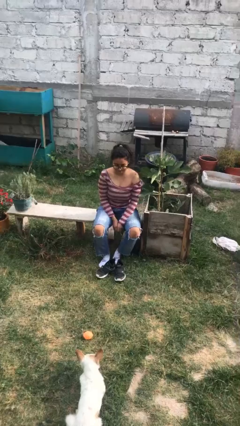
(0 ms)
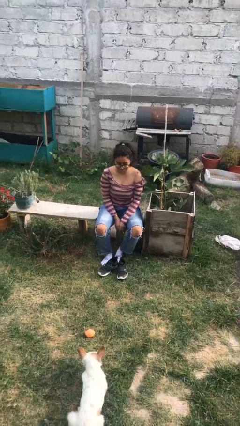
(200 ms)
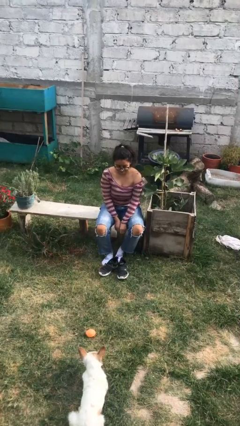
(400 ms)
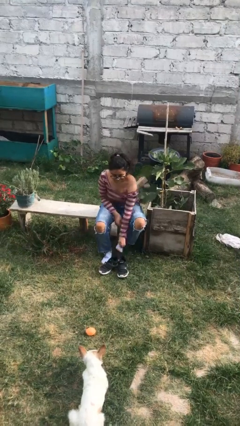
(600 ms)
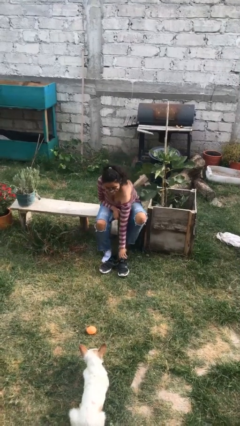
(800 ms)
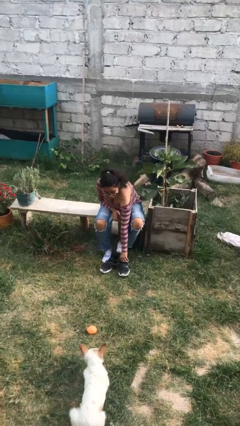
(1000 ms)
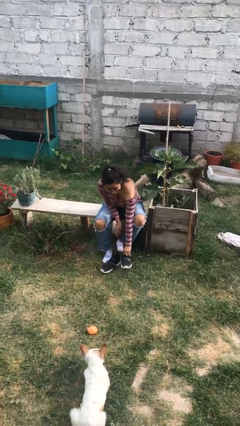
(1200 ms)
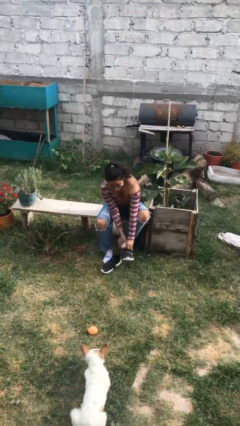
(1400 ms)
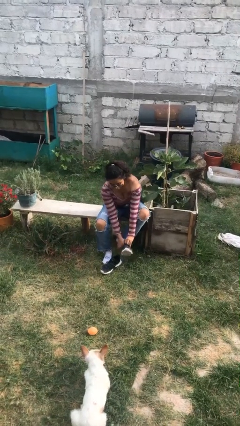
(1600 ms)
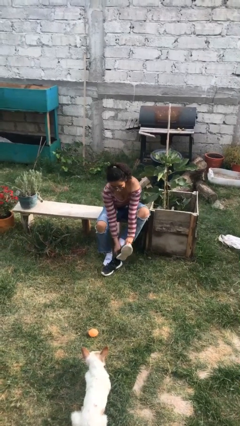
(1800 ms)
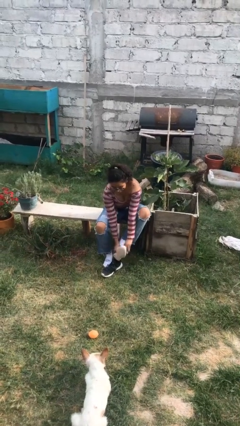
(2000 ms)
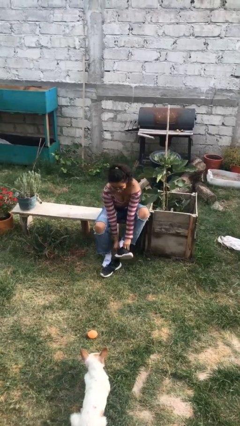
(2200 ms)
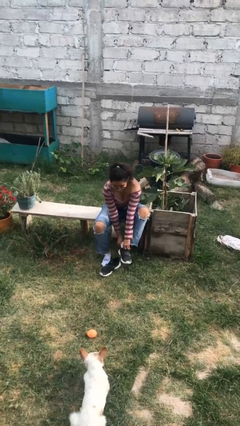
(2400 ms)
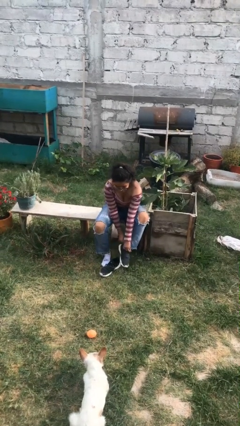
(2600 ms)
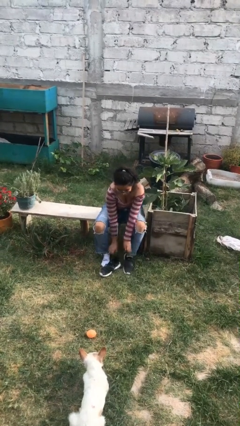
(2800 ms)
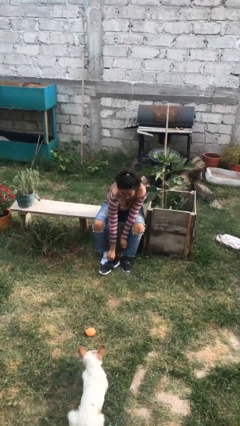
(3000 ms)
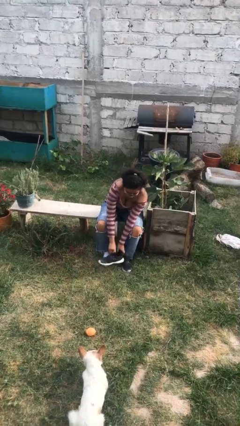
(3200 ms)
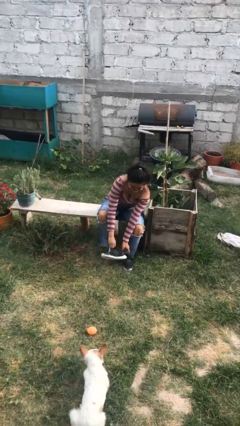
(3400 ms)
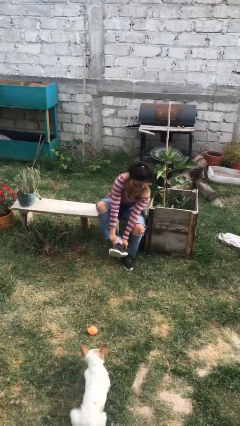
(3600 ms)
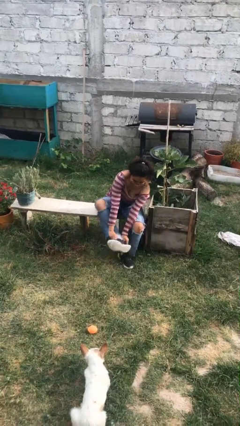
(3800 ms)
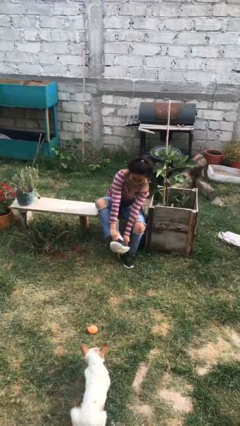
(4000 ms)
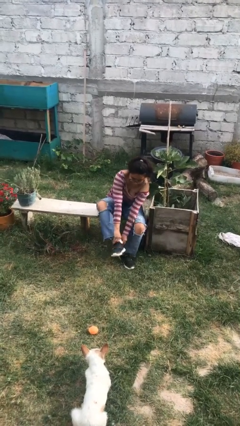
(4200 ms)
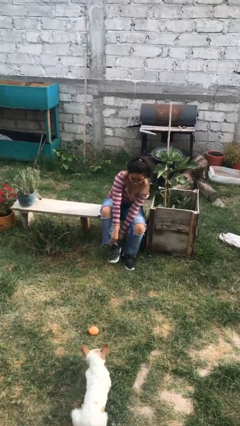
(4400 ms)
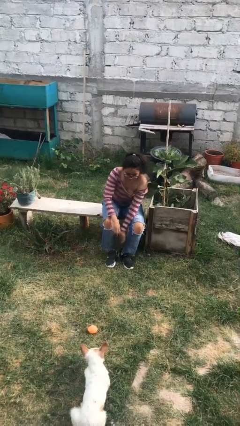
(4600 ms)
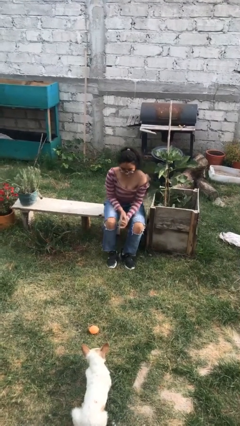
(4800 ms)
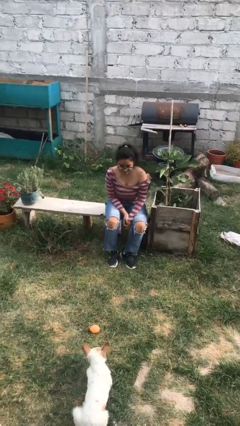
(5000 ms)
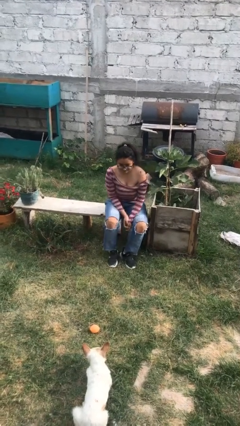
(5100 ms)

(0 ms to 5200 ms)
person puts on shoes

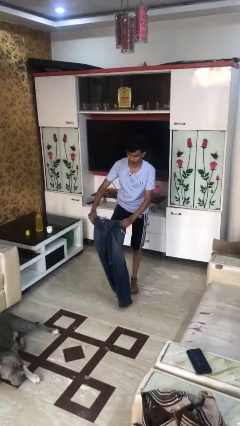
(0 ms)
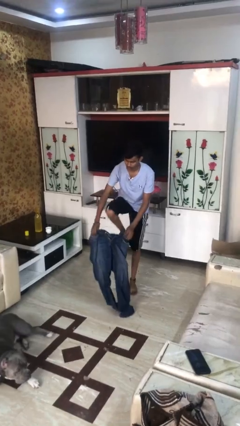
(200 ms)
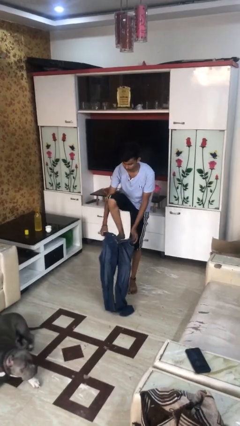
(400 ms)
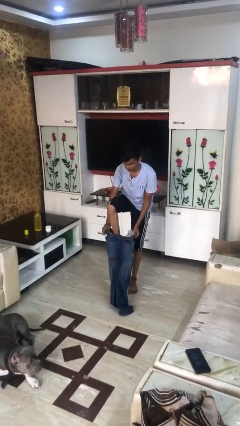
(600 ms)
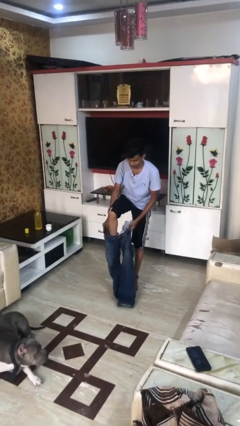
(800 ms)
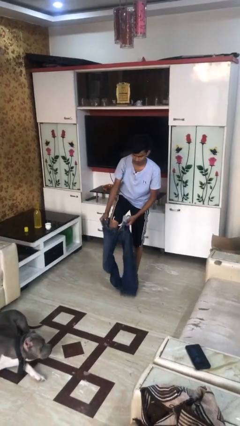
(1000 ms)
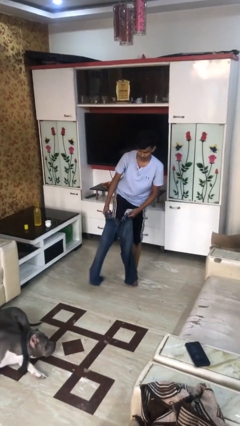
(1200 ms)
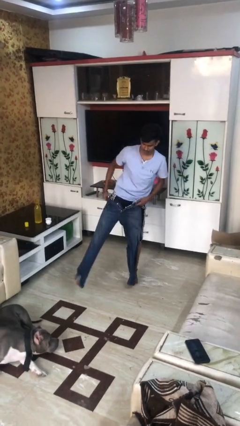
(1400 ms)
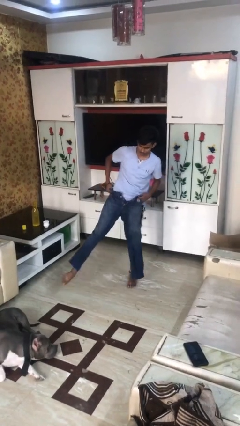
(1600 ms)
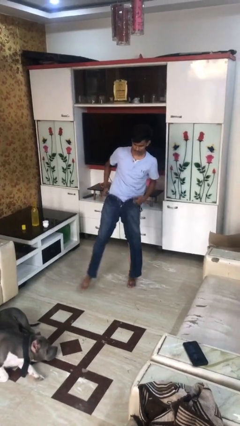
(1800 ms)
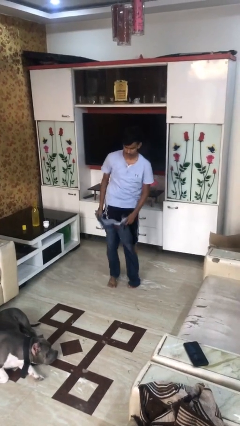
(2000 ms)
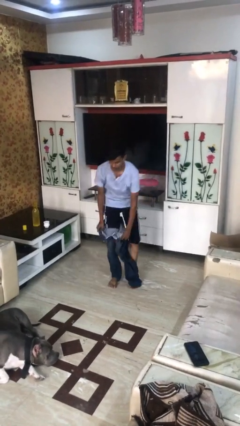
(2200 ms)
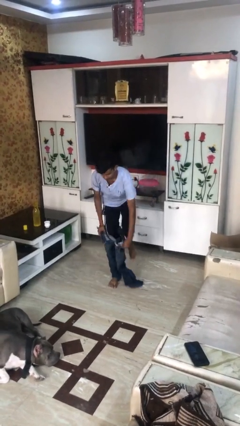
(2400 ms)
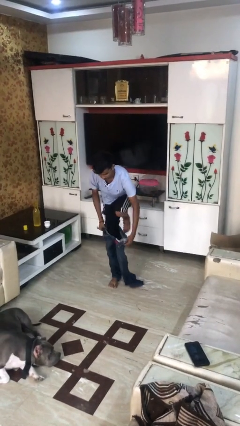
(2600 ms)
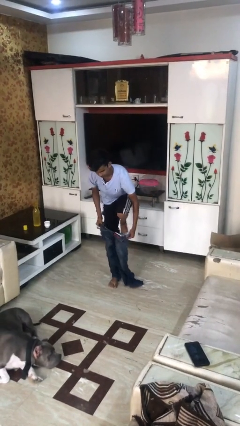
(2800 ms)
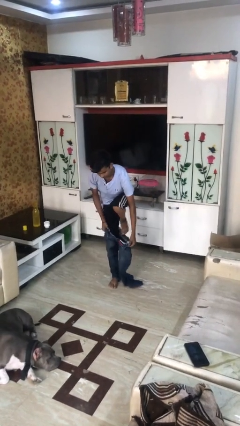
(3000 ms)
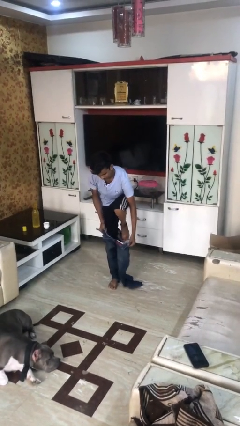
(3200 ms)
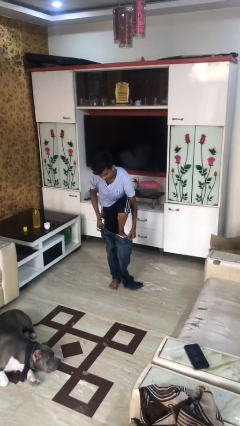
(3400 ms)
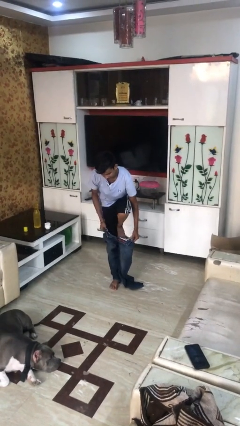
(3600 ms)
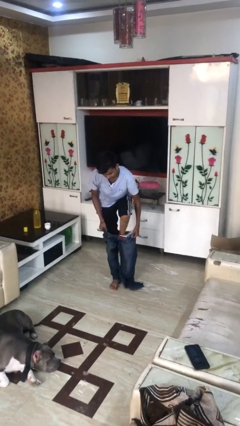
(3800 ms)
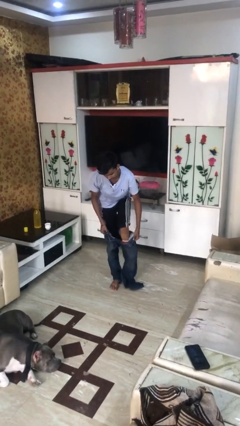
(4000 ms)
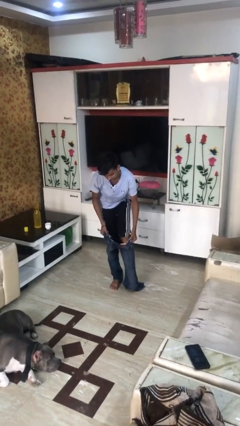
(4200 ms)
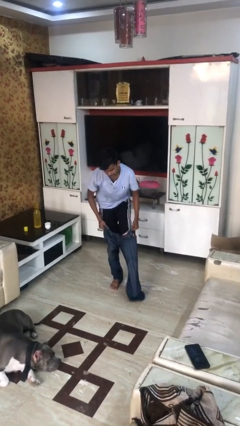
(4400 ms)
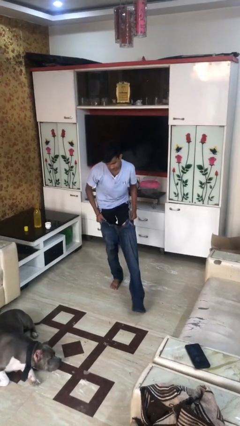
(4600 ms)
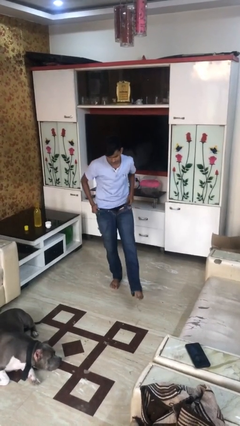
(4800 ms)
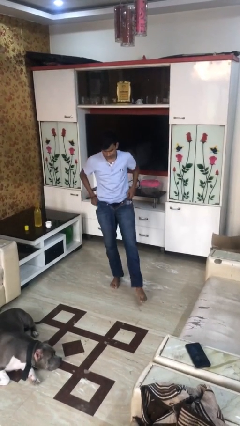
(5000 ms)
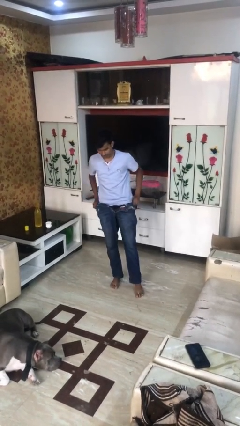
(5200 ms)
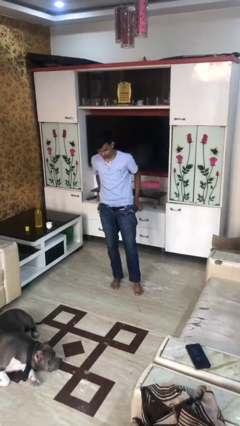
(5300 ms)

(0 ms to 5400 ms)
person puts on pants

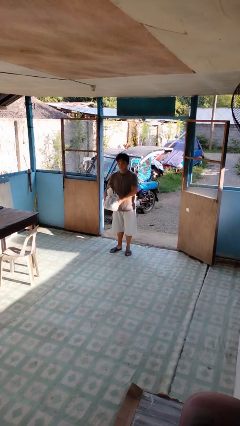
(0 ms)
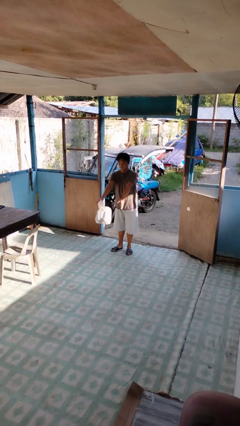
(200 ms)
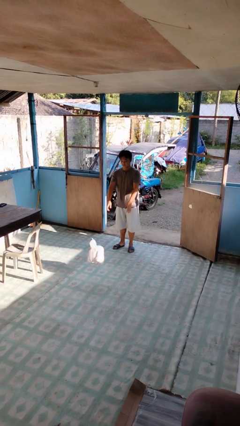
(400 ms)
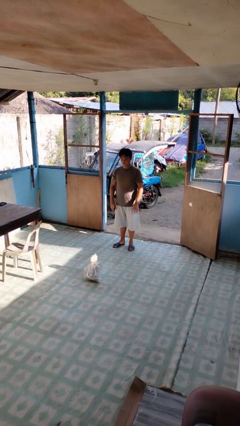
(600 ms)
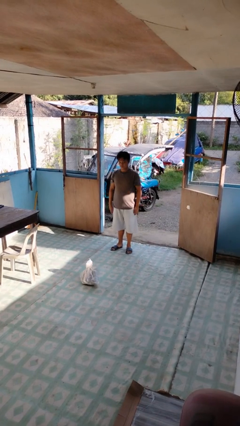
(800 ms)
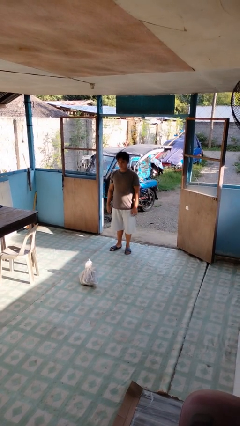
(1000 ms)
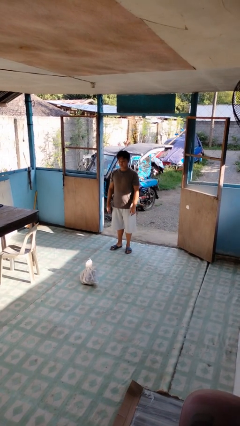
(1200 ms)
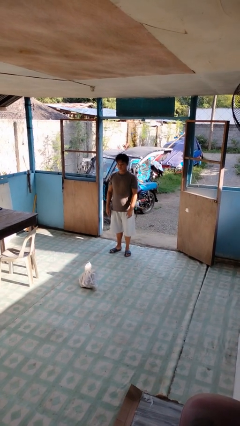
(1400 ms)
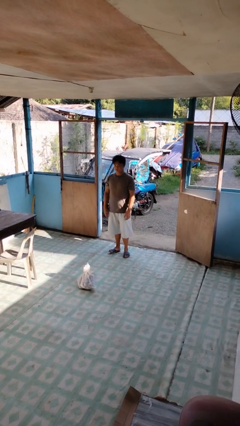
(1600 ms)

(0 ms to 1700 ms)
person throws object to ground

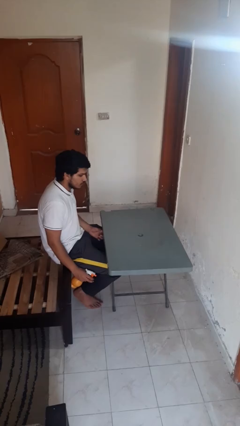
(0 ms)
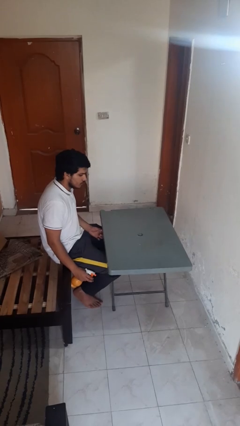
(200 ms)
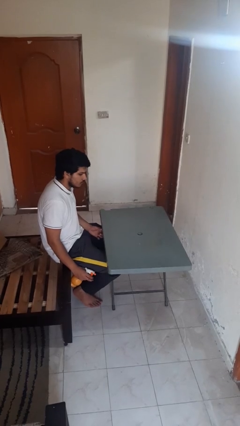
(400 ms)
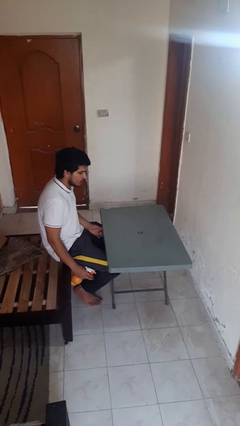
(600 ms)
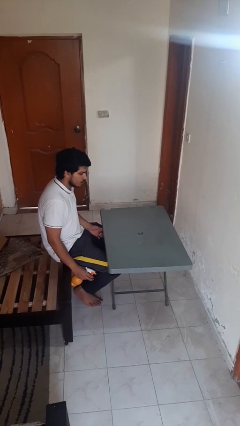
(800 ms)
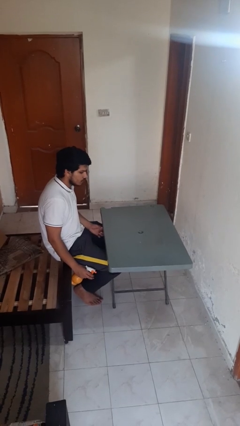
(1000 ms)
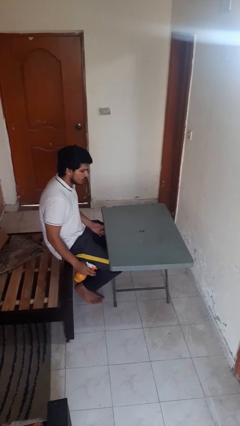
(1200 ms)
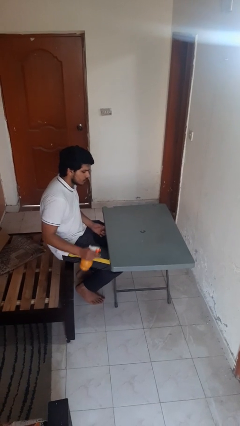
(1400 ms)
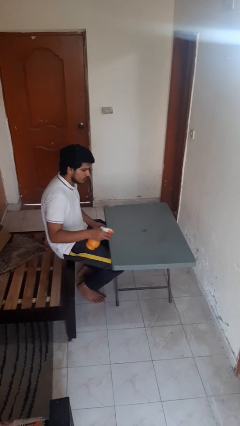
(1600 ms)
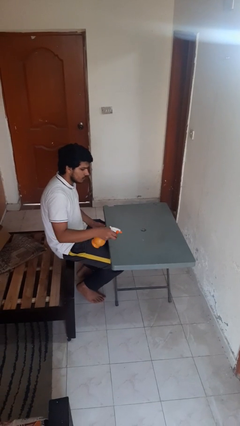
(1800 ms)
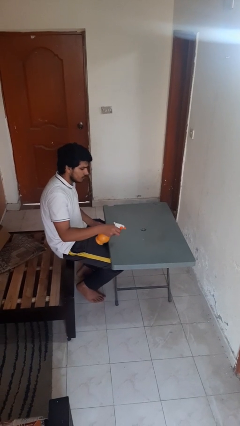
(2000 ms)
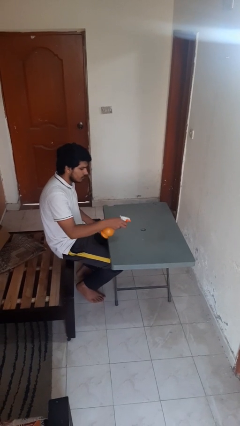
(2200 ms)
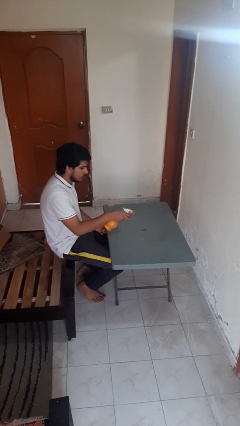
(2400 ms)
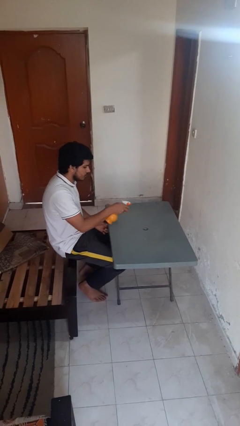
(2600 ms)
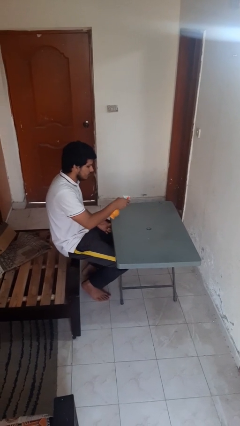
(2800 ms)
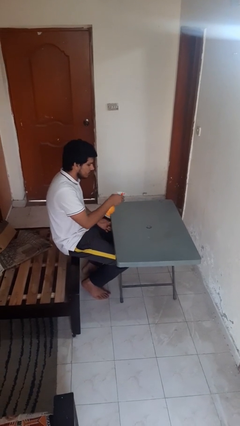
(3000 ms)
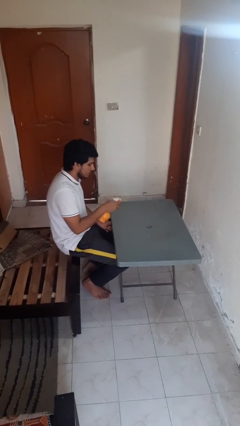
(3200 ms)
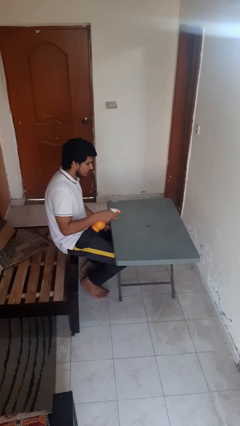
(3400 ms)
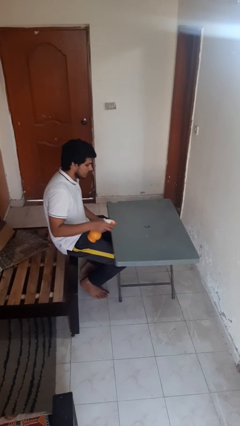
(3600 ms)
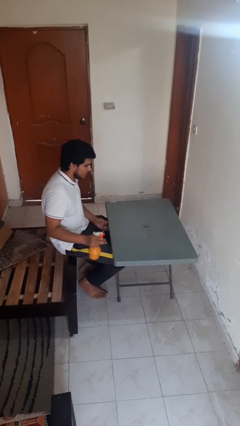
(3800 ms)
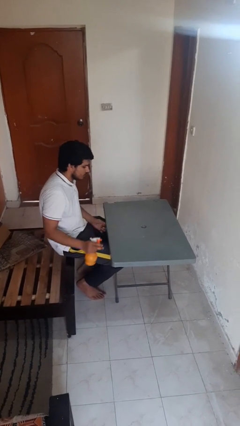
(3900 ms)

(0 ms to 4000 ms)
person sprays from bottle

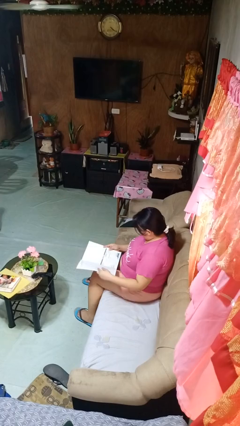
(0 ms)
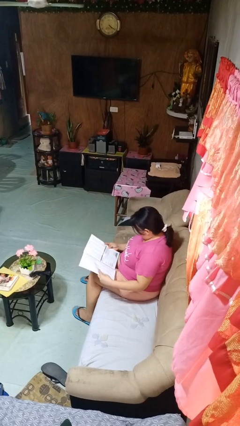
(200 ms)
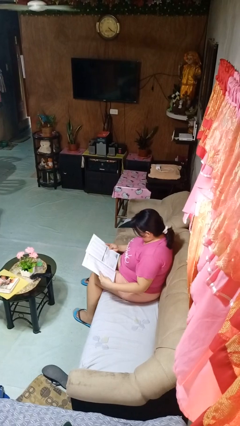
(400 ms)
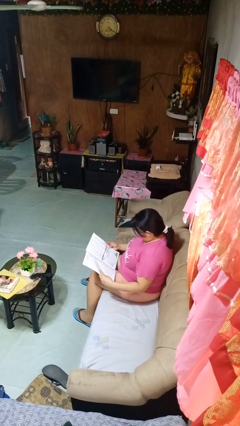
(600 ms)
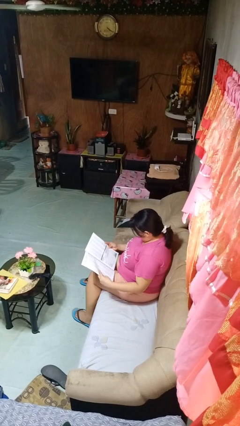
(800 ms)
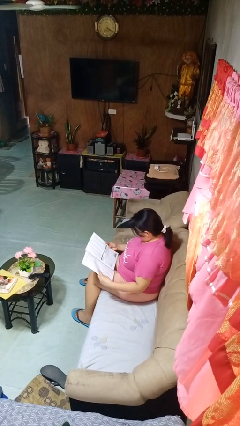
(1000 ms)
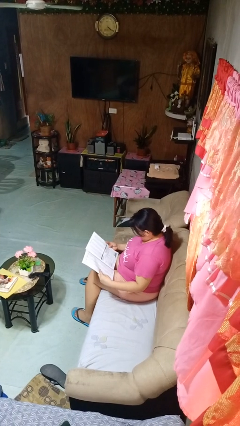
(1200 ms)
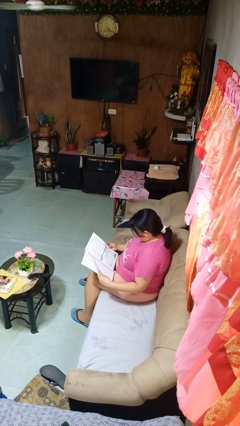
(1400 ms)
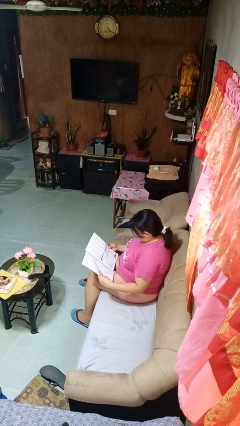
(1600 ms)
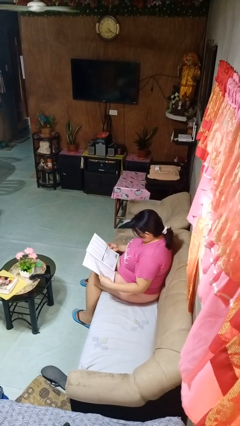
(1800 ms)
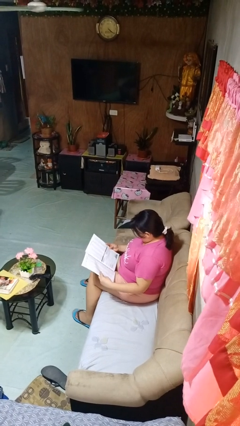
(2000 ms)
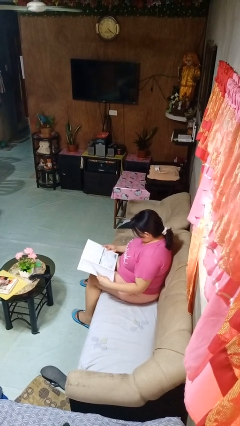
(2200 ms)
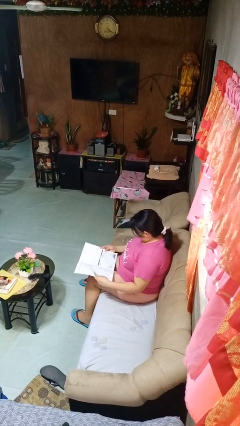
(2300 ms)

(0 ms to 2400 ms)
person reads magazine
